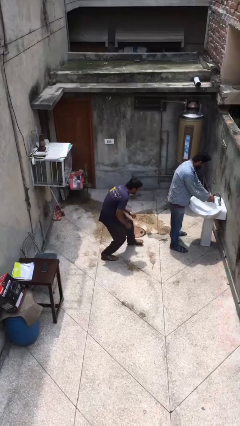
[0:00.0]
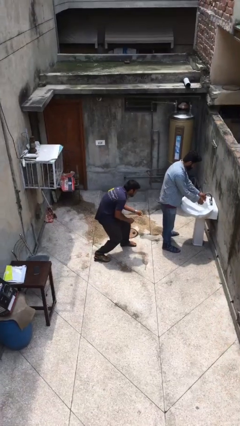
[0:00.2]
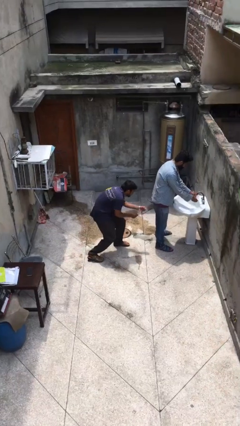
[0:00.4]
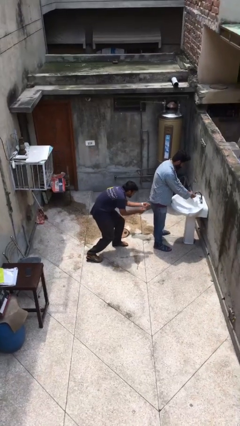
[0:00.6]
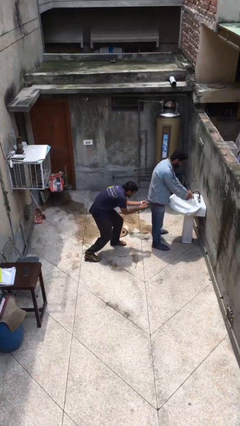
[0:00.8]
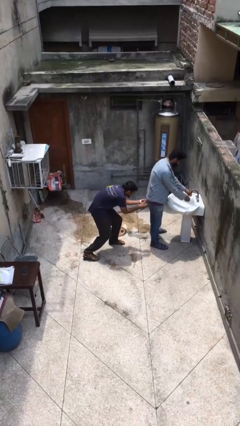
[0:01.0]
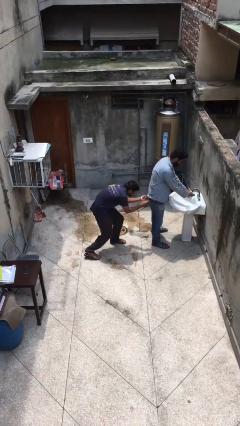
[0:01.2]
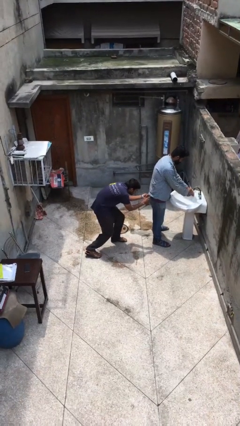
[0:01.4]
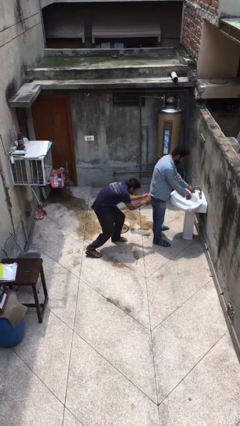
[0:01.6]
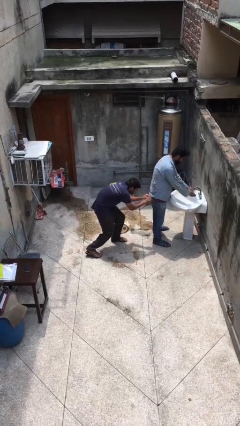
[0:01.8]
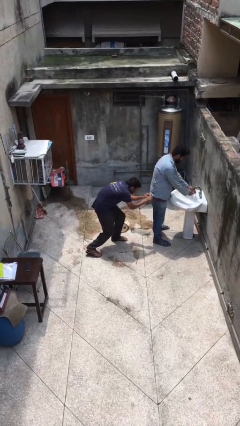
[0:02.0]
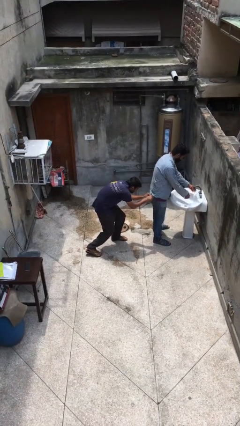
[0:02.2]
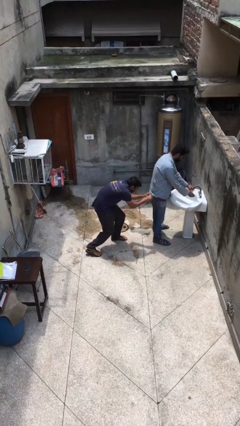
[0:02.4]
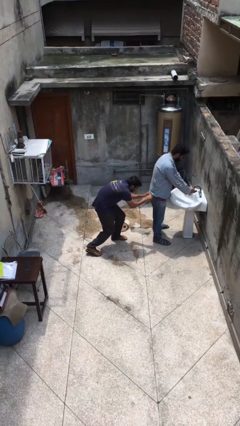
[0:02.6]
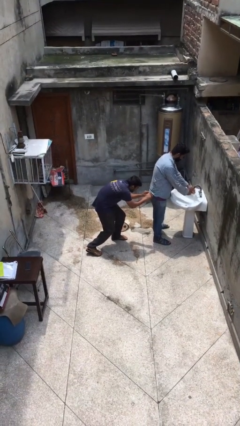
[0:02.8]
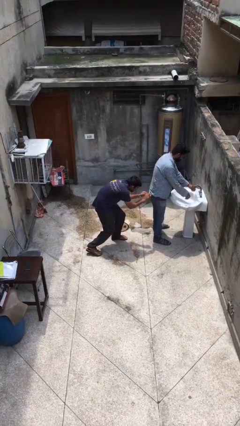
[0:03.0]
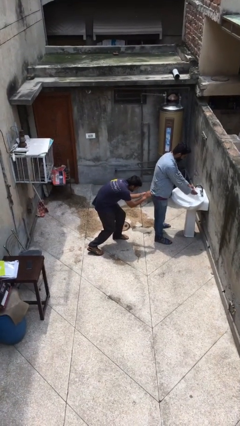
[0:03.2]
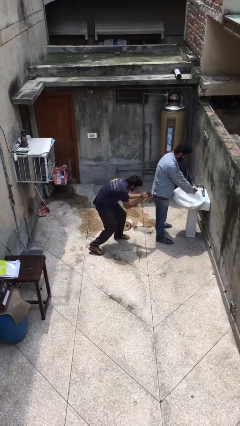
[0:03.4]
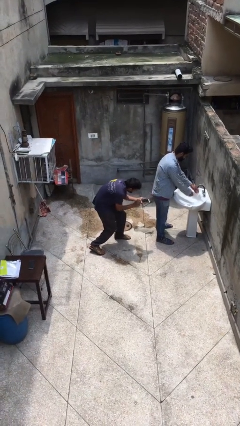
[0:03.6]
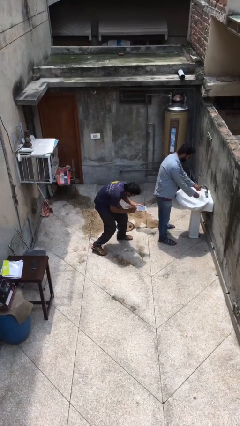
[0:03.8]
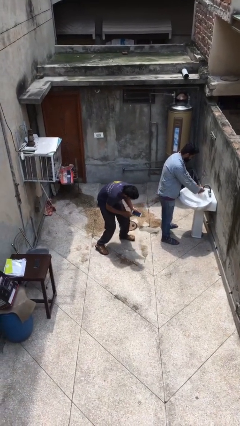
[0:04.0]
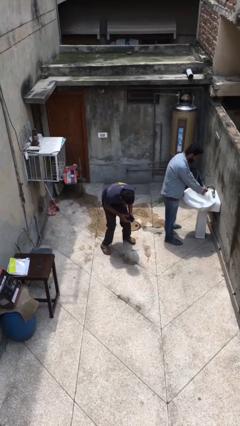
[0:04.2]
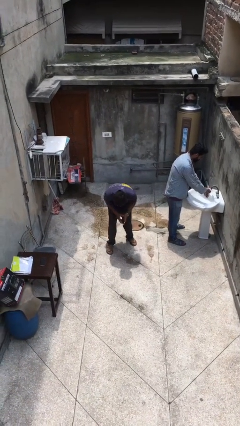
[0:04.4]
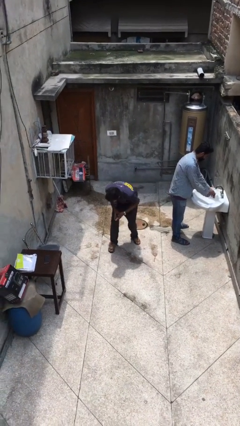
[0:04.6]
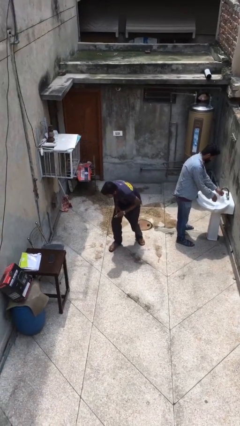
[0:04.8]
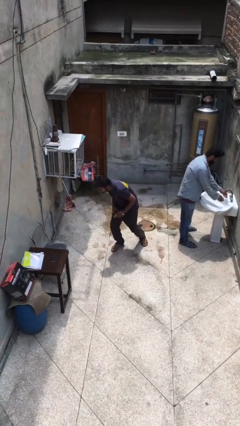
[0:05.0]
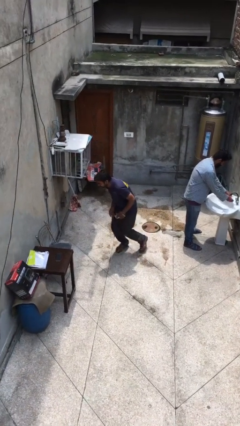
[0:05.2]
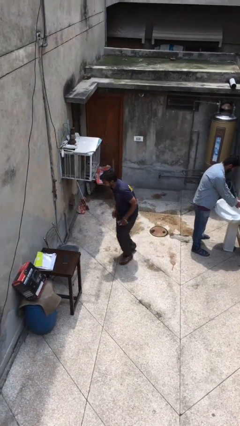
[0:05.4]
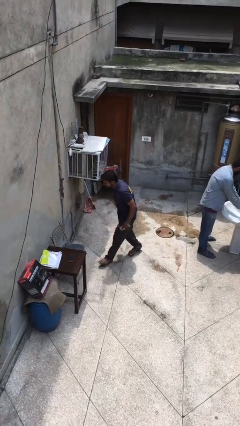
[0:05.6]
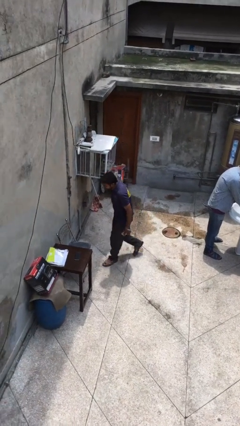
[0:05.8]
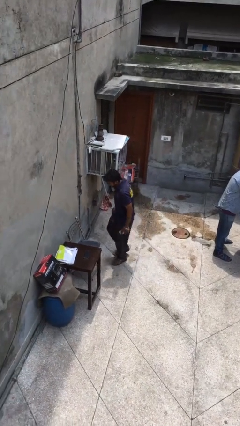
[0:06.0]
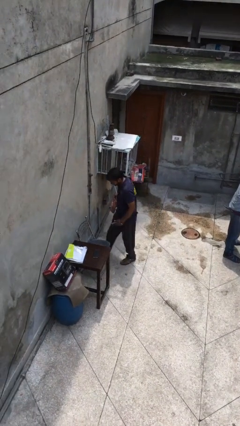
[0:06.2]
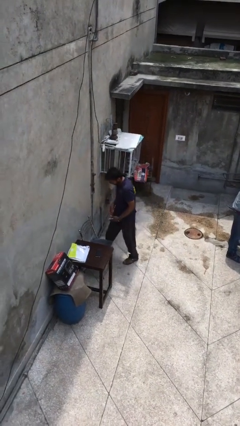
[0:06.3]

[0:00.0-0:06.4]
person steals object from person

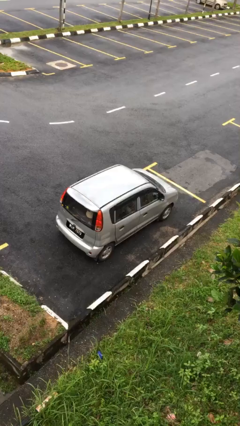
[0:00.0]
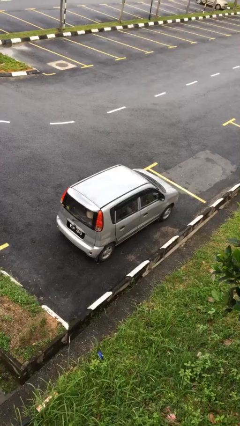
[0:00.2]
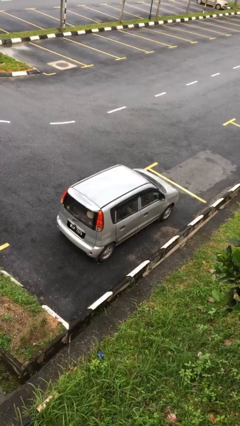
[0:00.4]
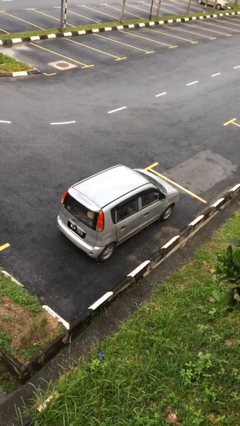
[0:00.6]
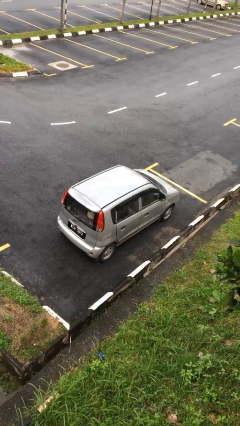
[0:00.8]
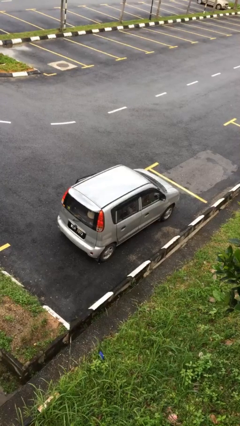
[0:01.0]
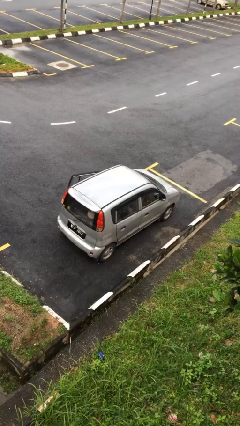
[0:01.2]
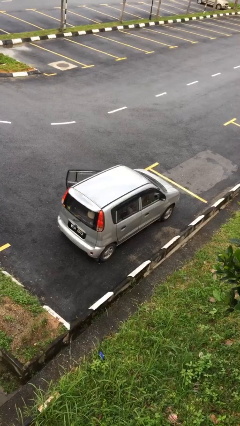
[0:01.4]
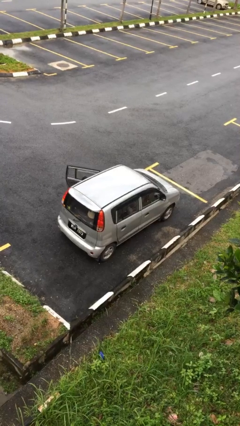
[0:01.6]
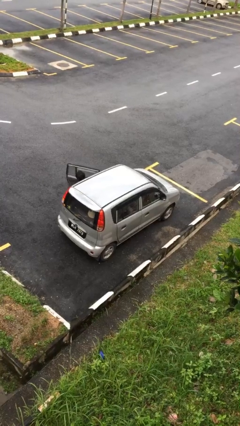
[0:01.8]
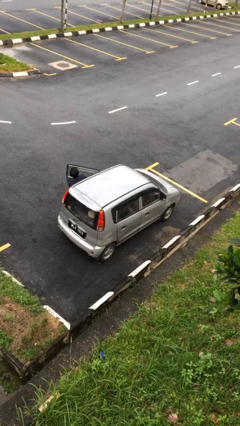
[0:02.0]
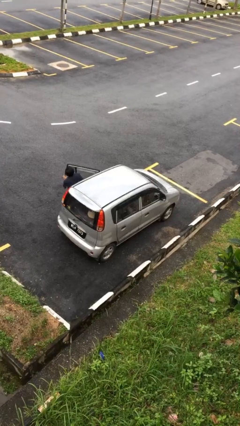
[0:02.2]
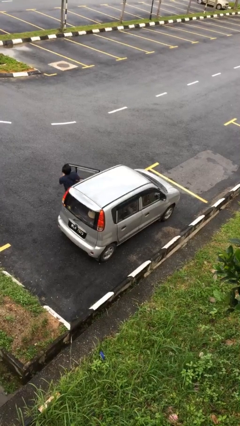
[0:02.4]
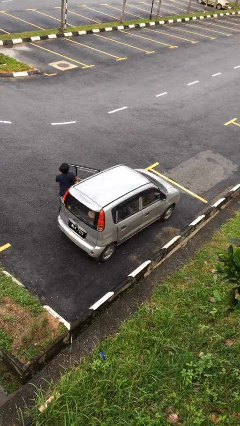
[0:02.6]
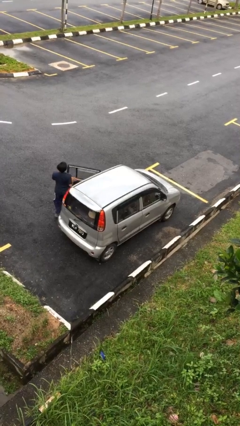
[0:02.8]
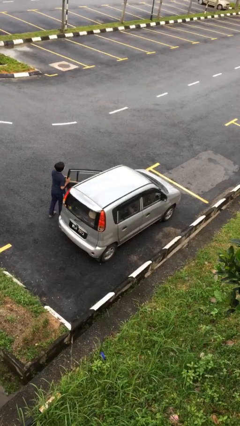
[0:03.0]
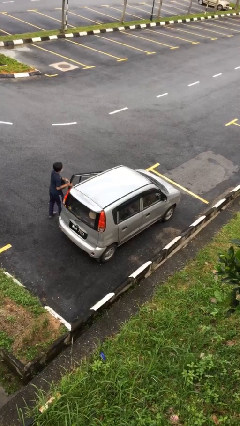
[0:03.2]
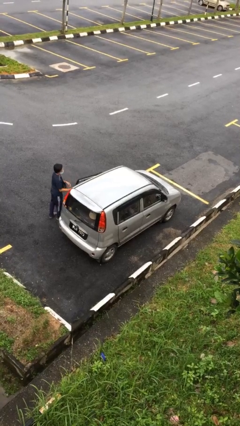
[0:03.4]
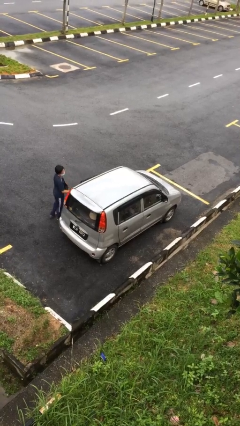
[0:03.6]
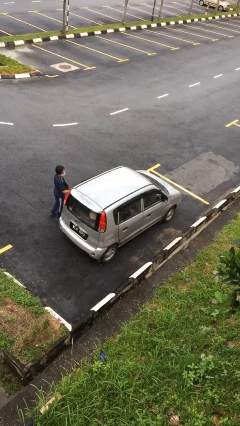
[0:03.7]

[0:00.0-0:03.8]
car drops off person

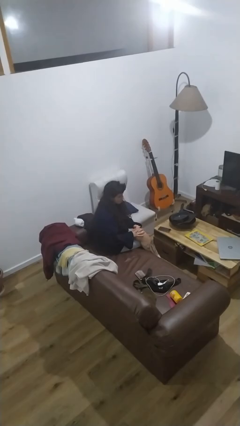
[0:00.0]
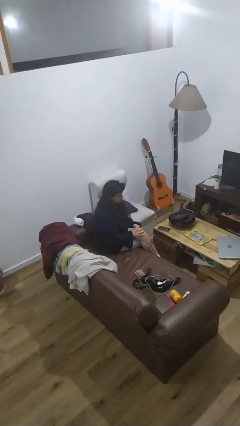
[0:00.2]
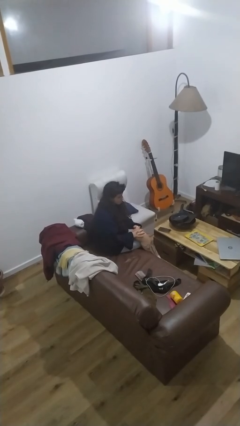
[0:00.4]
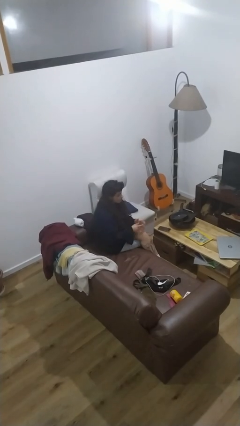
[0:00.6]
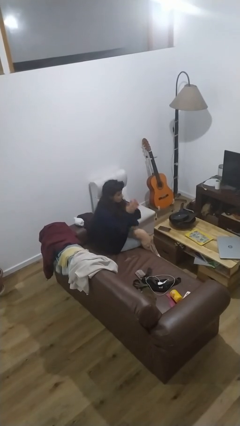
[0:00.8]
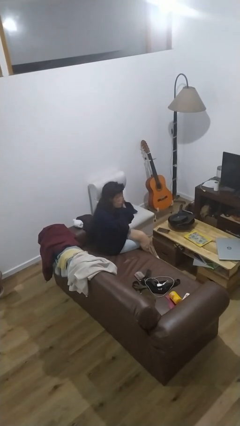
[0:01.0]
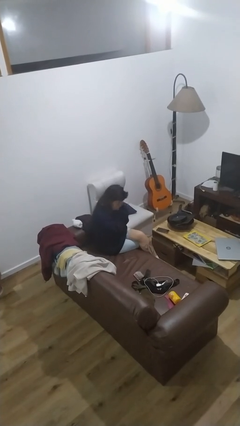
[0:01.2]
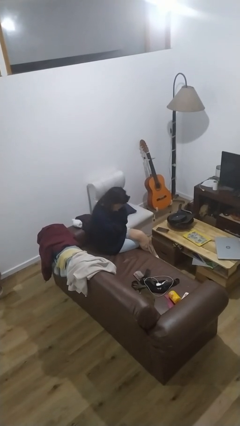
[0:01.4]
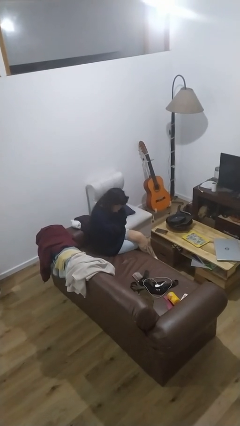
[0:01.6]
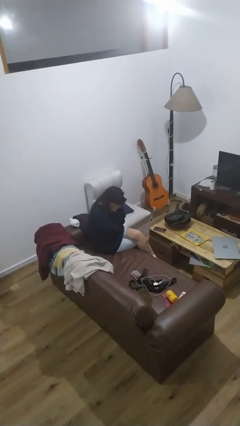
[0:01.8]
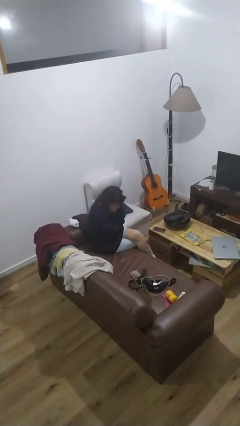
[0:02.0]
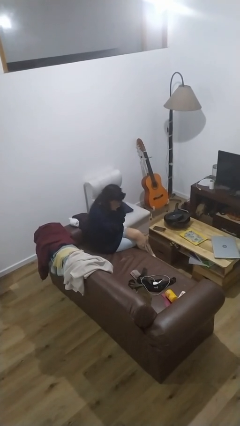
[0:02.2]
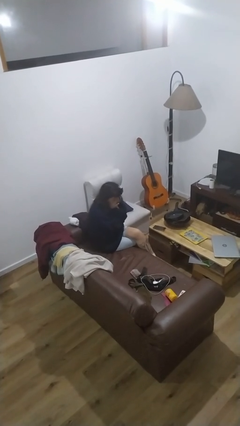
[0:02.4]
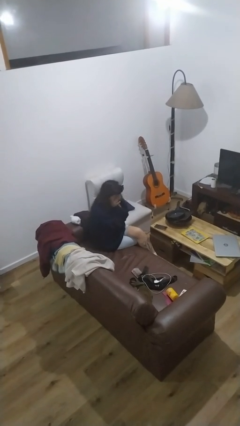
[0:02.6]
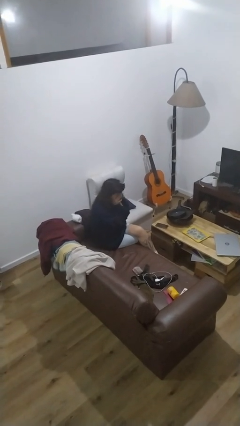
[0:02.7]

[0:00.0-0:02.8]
person covers face with hands

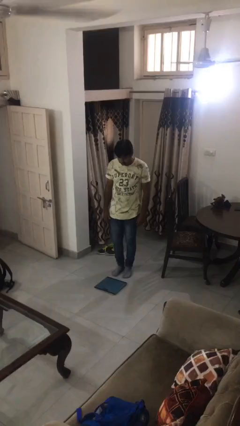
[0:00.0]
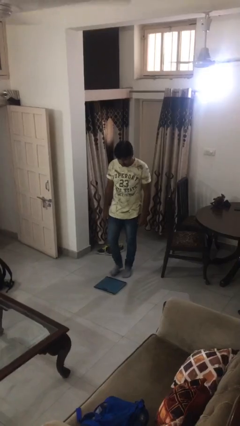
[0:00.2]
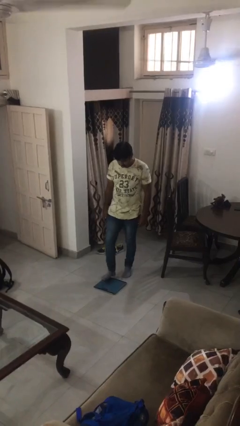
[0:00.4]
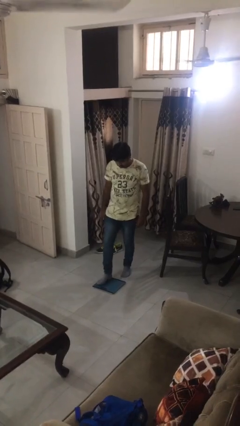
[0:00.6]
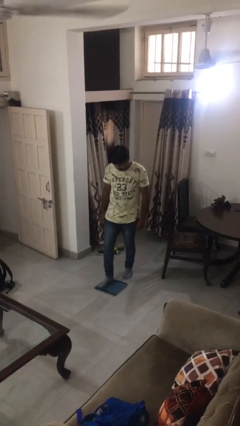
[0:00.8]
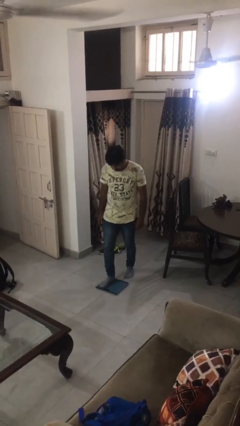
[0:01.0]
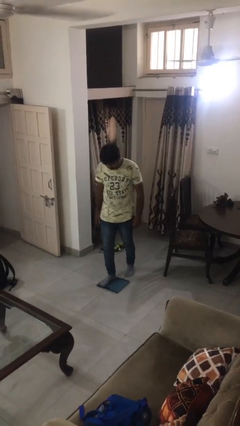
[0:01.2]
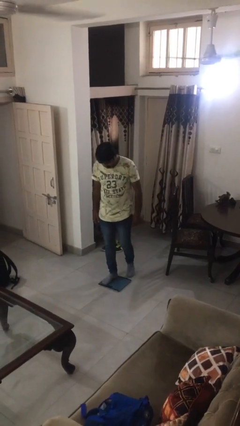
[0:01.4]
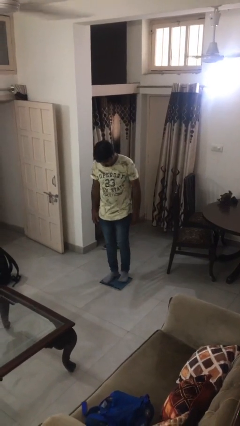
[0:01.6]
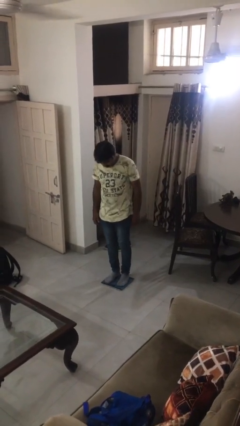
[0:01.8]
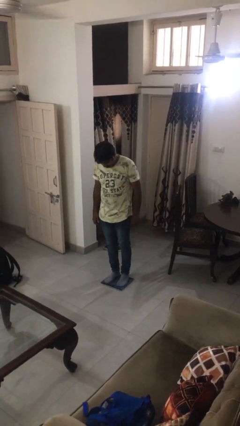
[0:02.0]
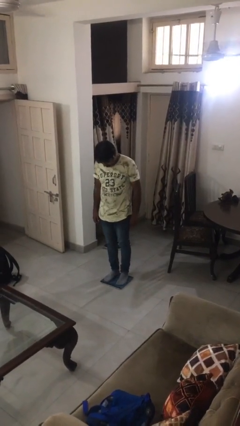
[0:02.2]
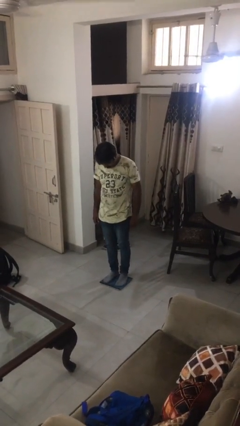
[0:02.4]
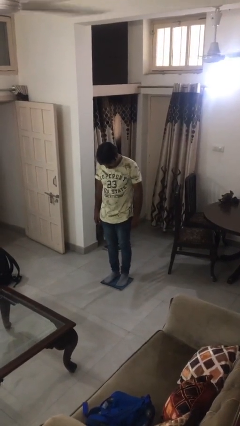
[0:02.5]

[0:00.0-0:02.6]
person uses bodyweight scale

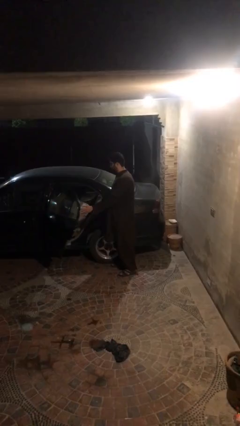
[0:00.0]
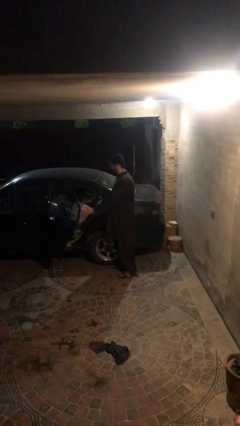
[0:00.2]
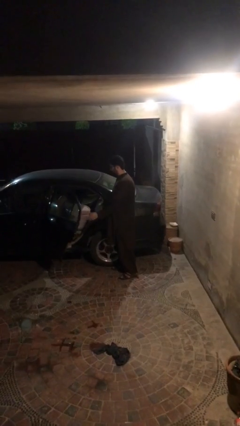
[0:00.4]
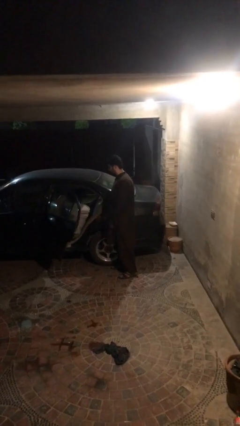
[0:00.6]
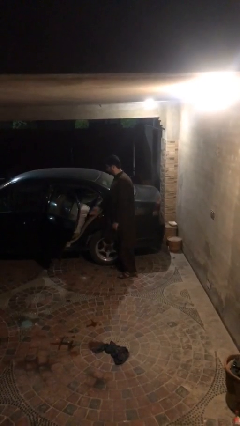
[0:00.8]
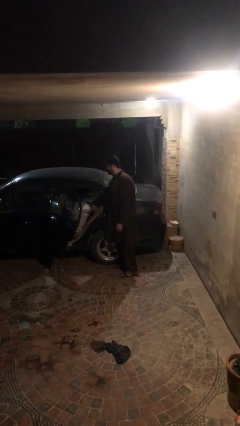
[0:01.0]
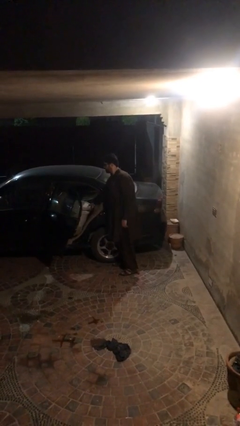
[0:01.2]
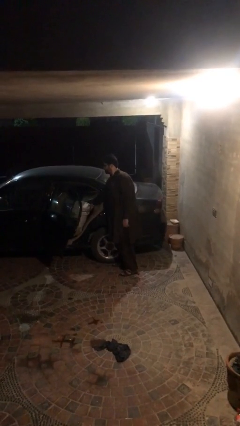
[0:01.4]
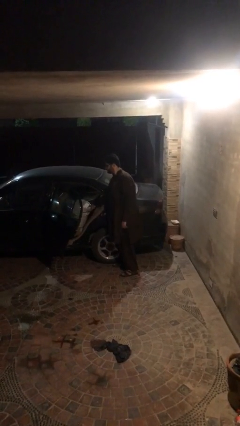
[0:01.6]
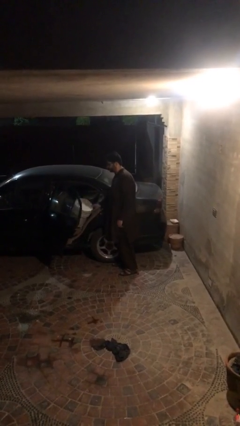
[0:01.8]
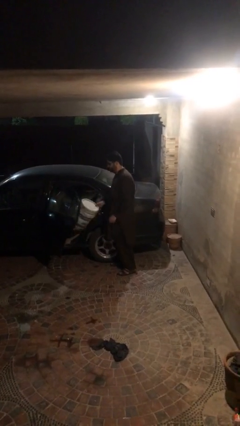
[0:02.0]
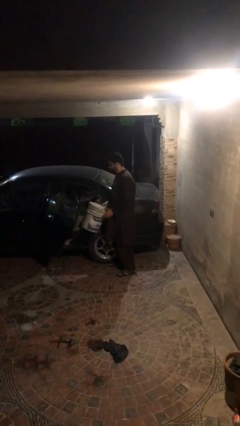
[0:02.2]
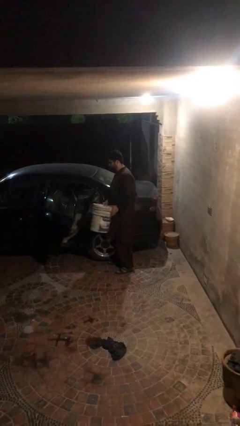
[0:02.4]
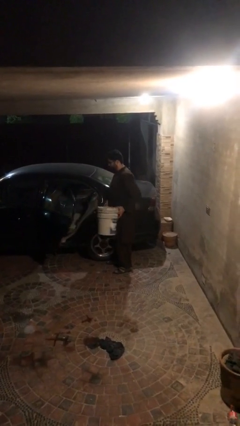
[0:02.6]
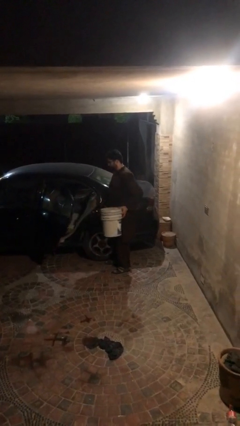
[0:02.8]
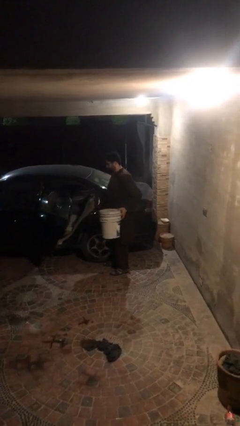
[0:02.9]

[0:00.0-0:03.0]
person unloads car
